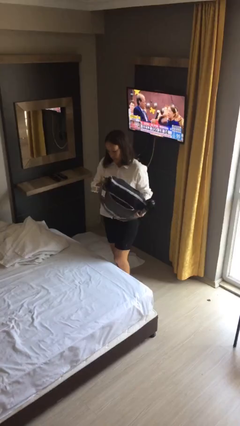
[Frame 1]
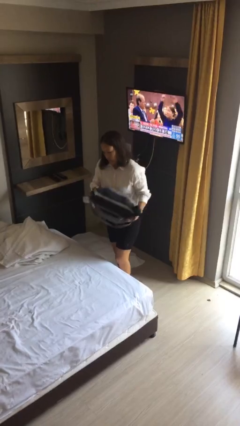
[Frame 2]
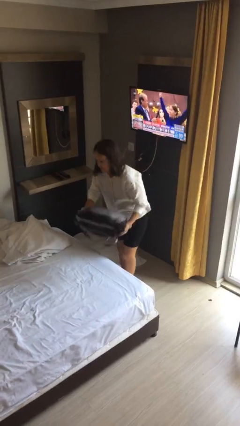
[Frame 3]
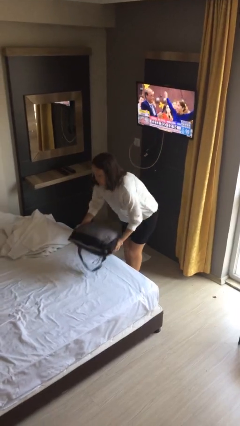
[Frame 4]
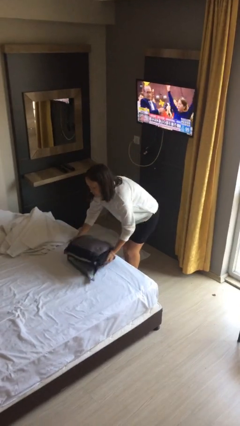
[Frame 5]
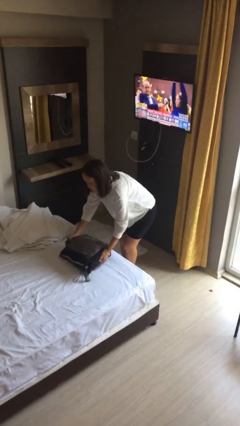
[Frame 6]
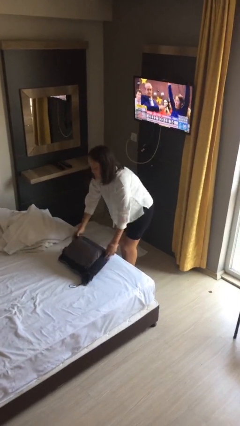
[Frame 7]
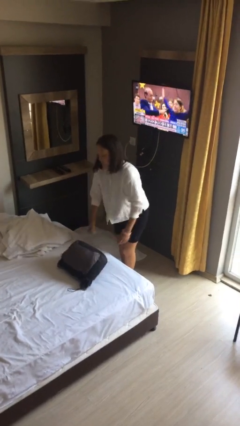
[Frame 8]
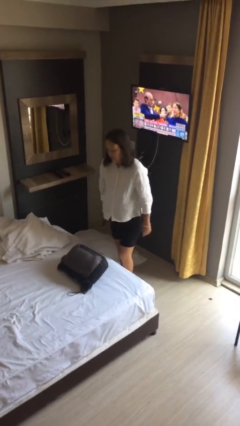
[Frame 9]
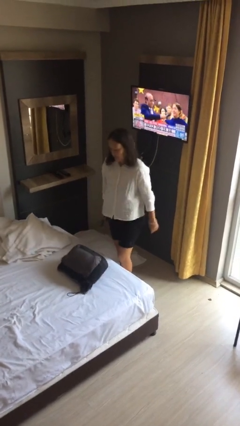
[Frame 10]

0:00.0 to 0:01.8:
person puts down object on bed

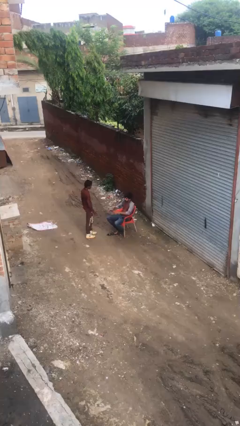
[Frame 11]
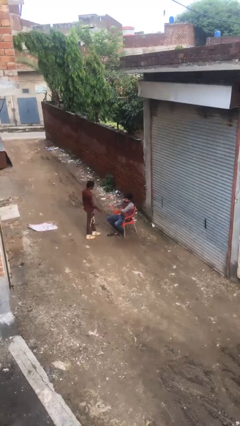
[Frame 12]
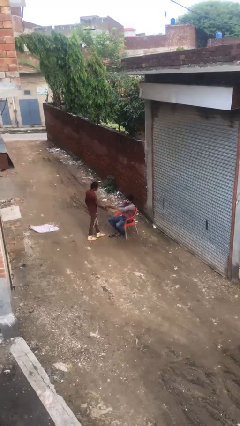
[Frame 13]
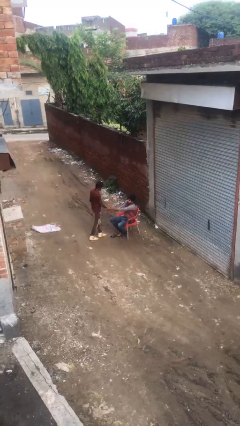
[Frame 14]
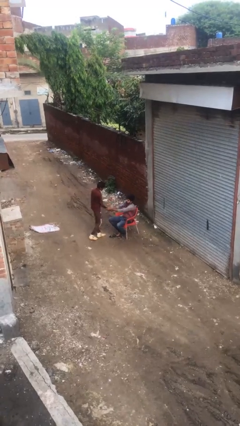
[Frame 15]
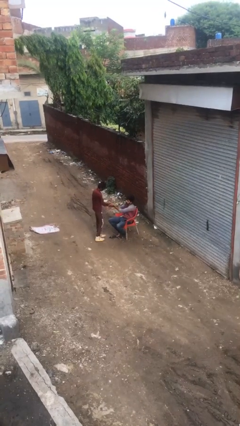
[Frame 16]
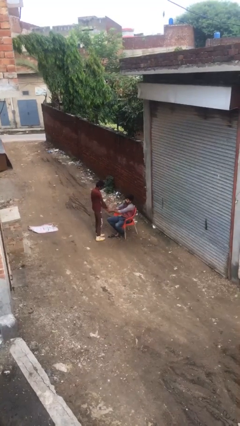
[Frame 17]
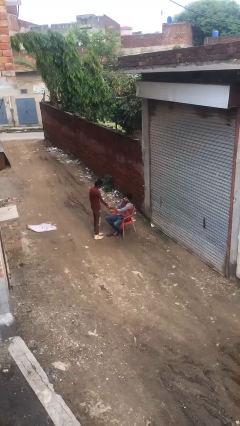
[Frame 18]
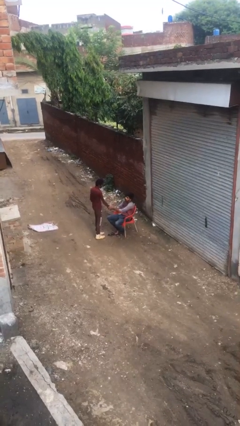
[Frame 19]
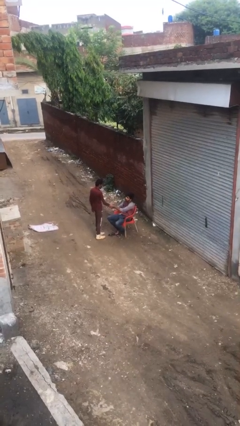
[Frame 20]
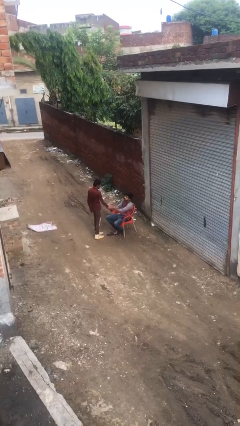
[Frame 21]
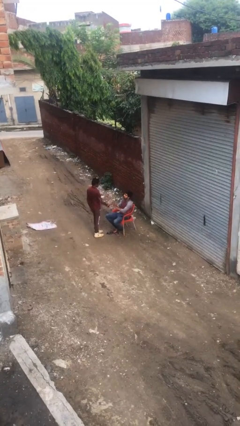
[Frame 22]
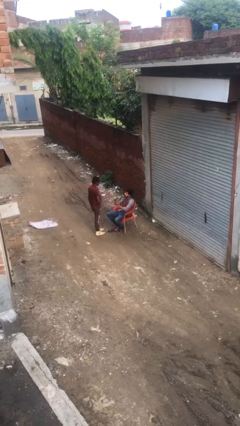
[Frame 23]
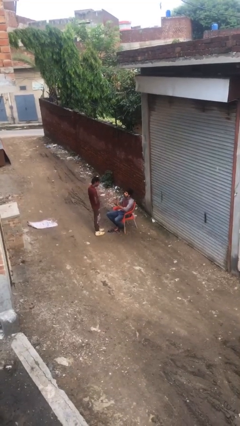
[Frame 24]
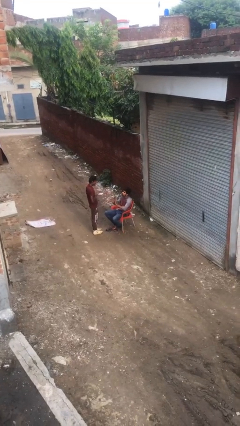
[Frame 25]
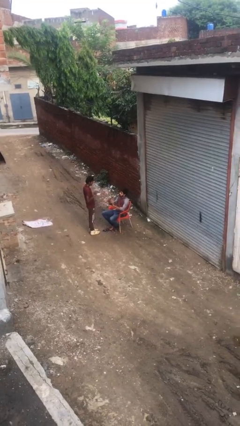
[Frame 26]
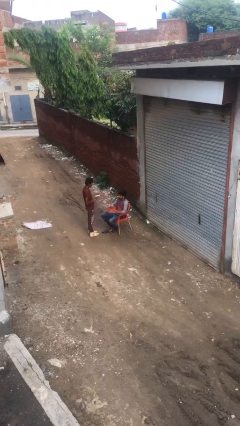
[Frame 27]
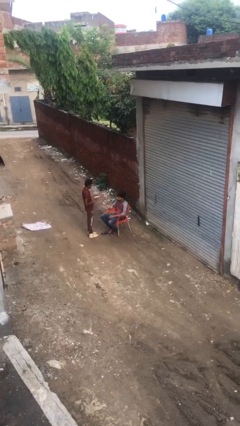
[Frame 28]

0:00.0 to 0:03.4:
person shakes hand

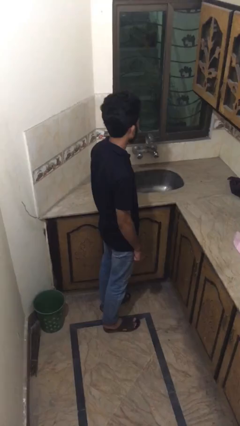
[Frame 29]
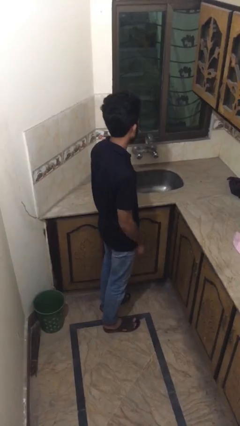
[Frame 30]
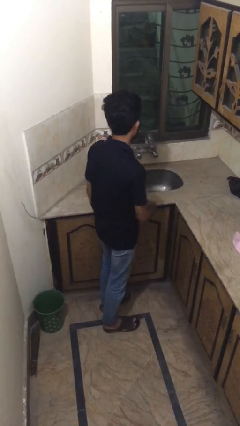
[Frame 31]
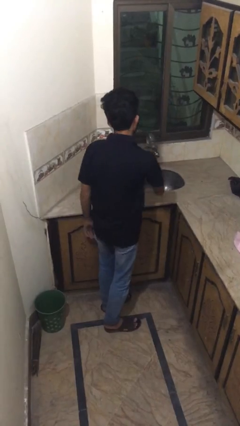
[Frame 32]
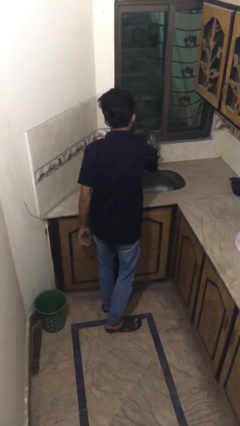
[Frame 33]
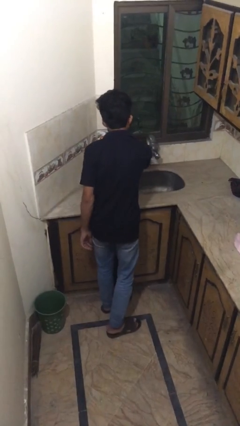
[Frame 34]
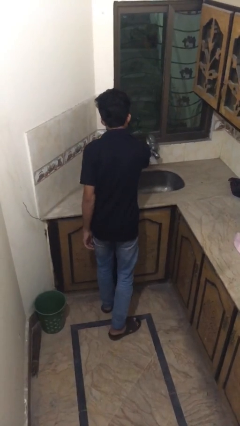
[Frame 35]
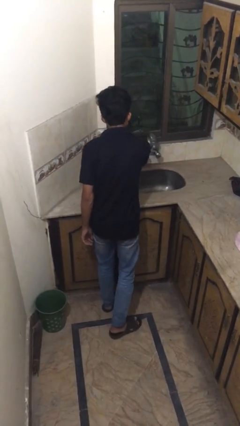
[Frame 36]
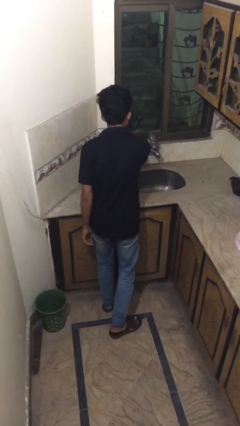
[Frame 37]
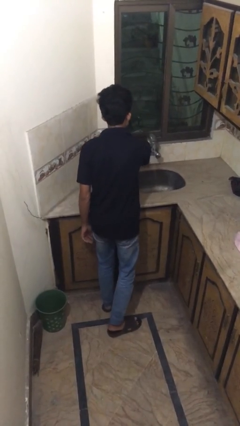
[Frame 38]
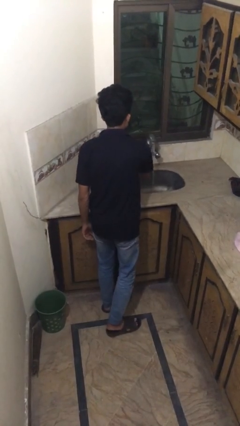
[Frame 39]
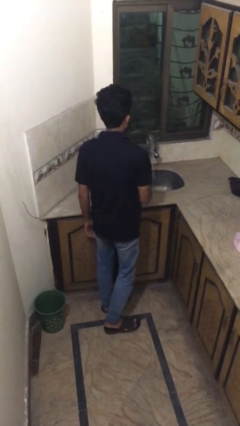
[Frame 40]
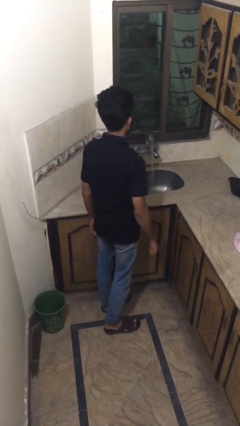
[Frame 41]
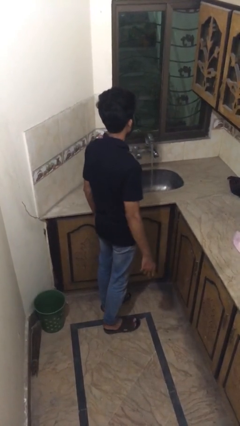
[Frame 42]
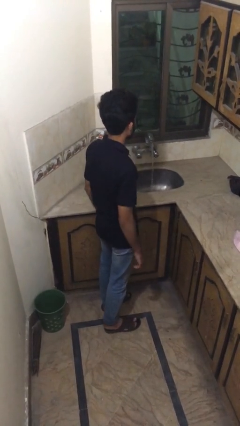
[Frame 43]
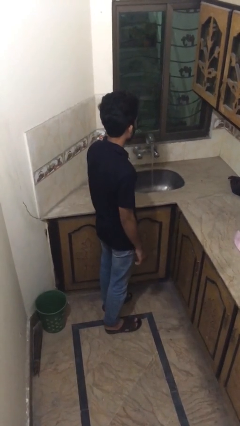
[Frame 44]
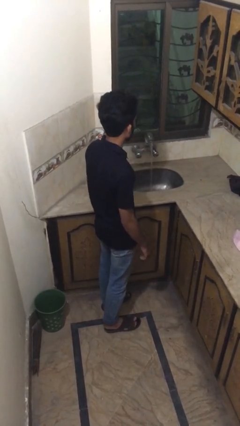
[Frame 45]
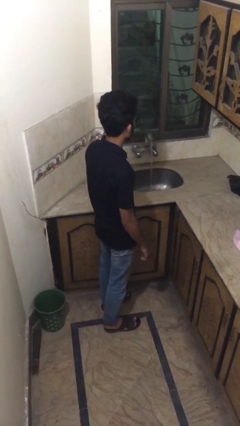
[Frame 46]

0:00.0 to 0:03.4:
person turns on faucet

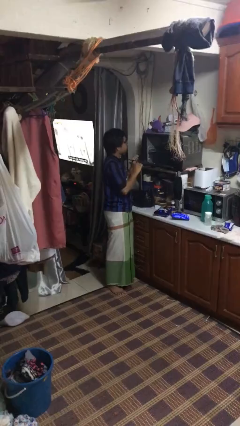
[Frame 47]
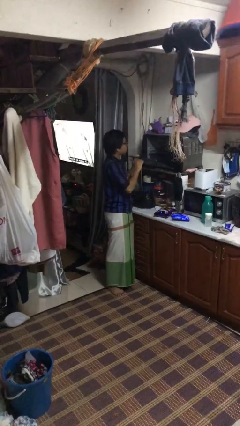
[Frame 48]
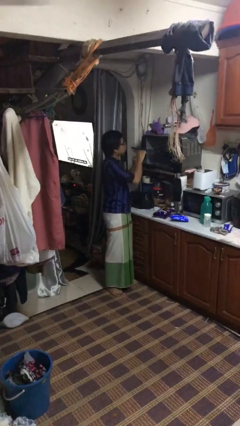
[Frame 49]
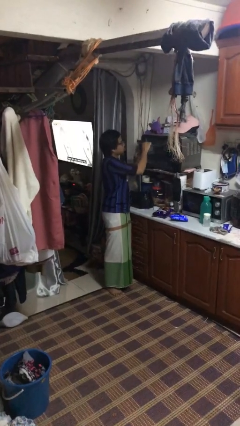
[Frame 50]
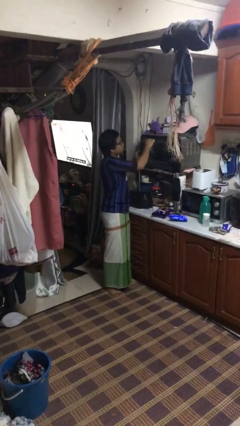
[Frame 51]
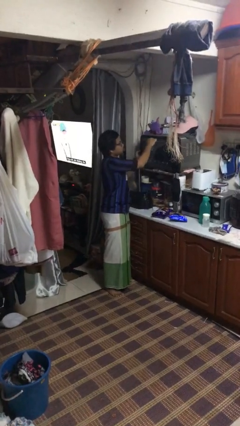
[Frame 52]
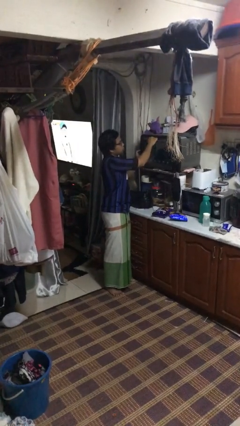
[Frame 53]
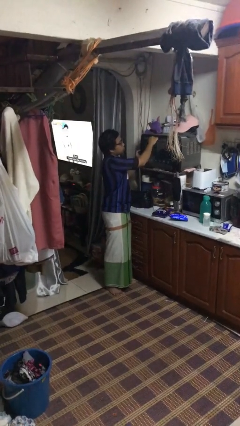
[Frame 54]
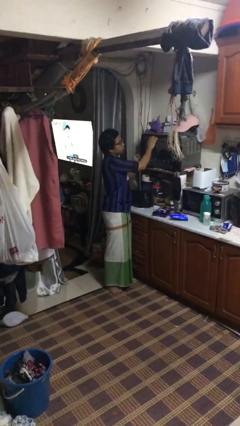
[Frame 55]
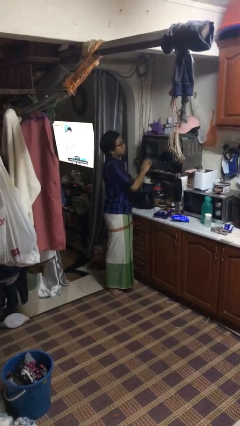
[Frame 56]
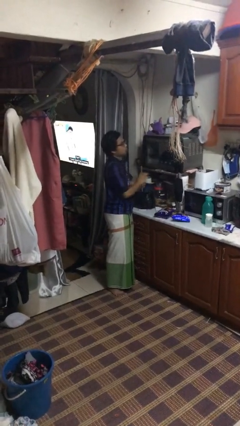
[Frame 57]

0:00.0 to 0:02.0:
person closes oven door

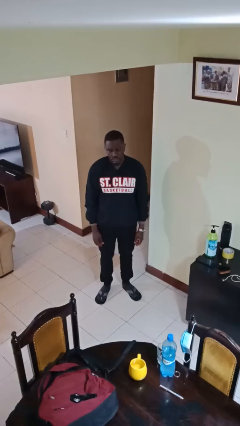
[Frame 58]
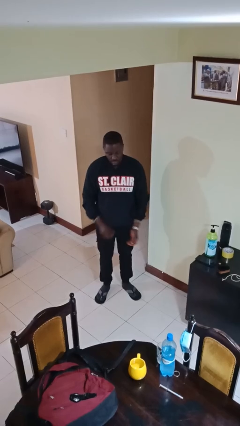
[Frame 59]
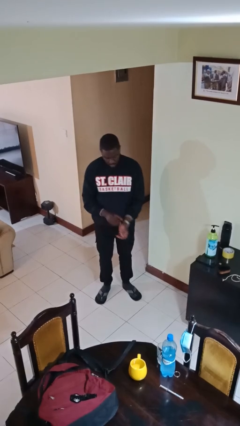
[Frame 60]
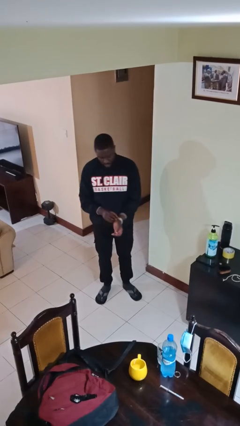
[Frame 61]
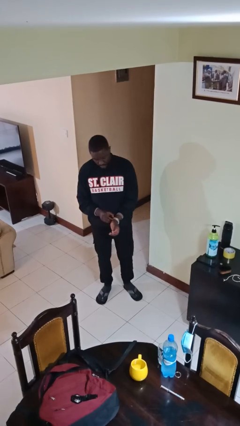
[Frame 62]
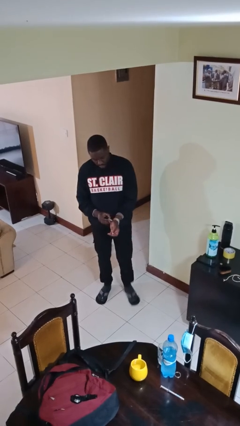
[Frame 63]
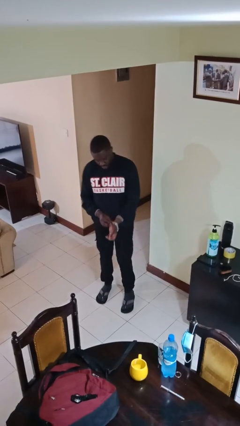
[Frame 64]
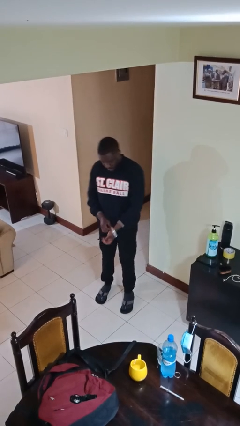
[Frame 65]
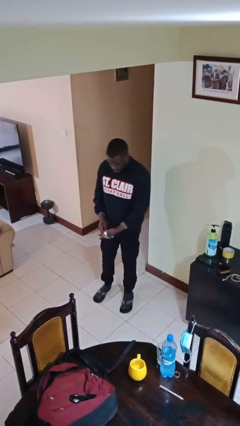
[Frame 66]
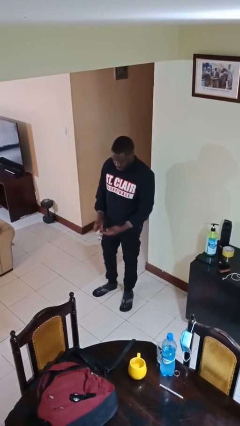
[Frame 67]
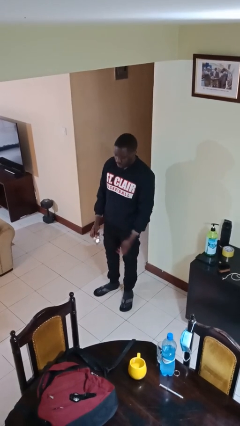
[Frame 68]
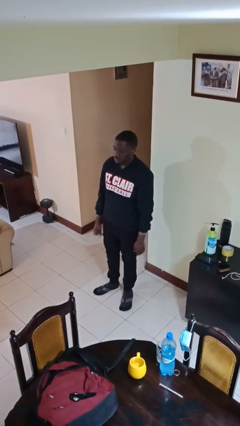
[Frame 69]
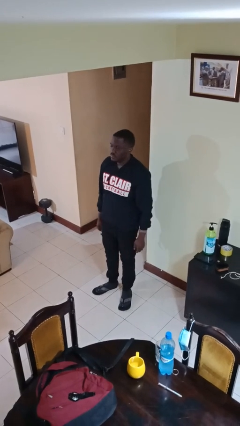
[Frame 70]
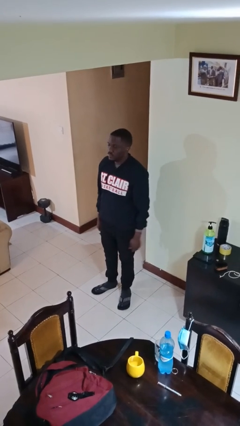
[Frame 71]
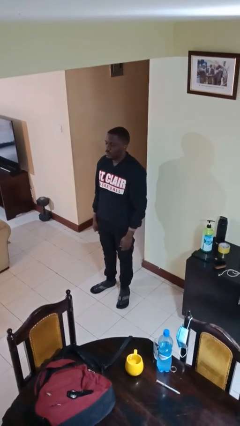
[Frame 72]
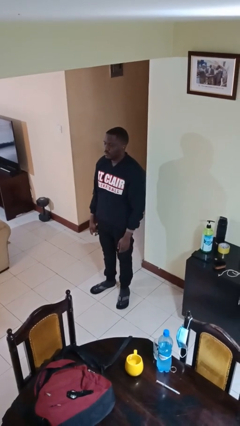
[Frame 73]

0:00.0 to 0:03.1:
person takes off wristwatch

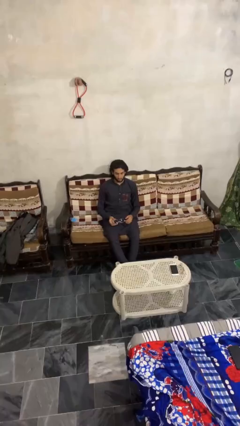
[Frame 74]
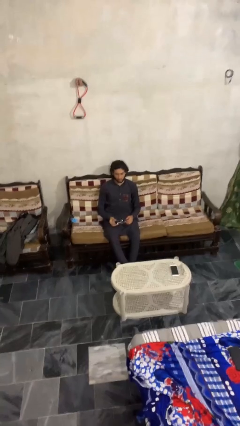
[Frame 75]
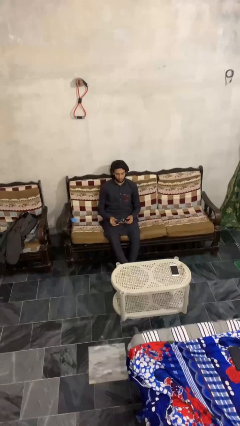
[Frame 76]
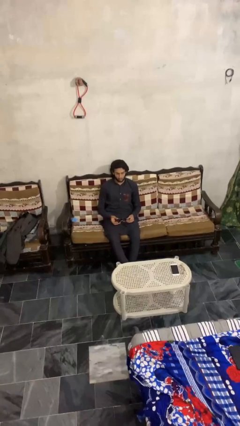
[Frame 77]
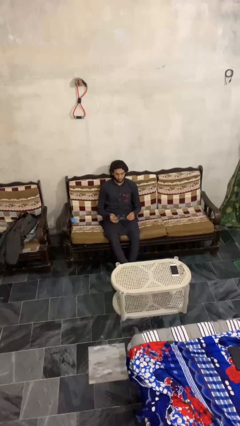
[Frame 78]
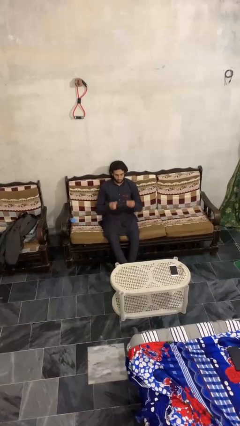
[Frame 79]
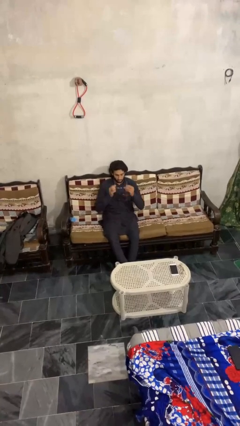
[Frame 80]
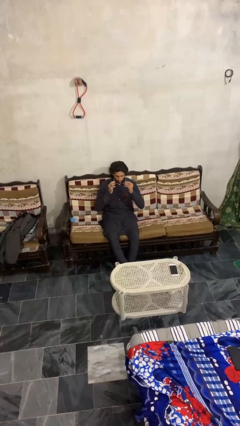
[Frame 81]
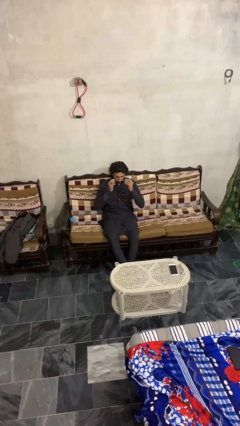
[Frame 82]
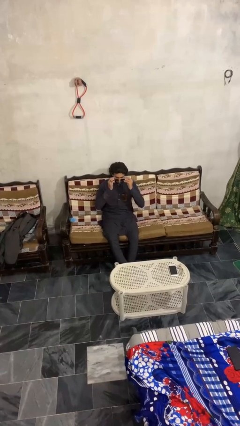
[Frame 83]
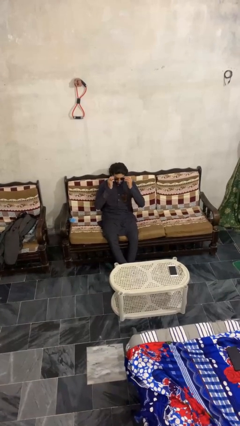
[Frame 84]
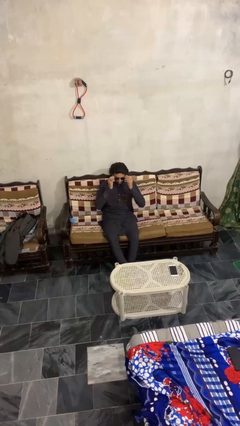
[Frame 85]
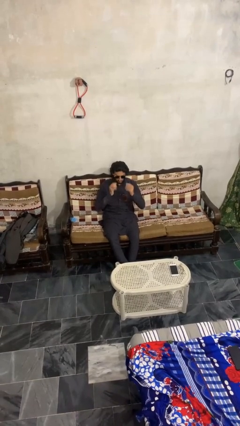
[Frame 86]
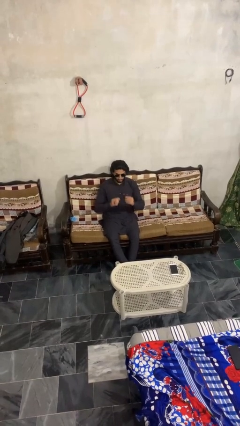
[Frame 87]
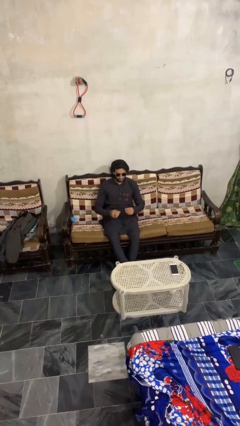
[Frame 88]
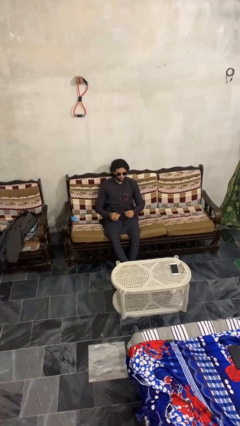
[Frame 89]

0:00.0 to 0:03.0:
person puts on sunglasses

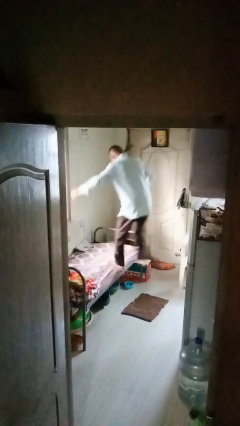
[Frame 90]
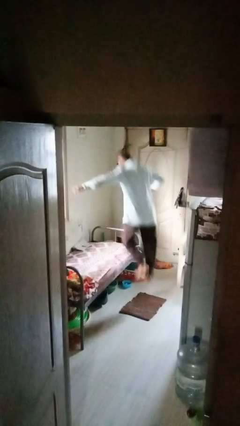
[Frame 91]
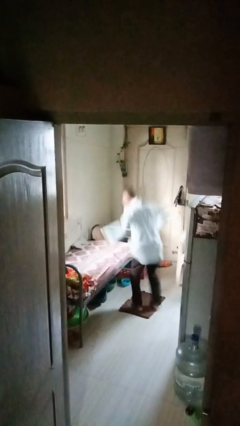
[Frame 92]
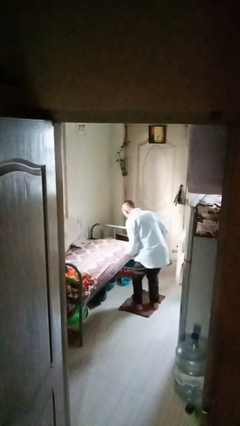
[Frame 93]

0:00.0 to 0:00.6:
person jumps on bed
